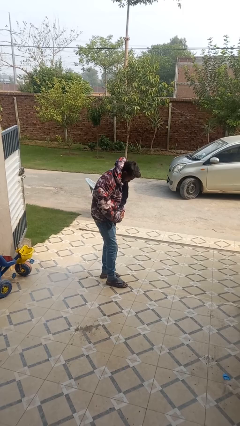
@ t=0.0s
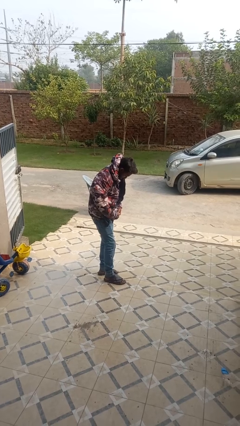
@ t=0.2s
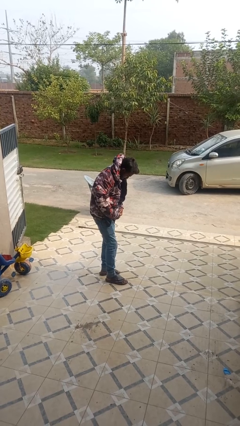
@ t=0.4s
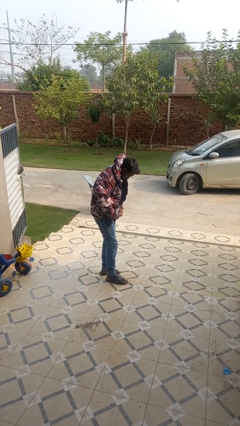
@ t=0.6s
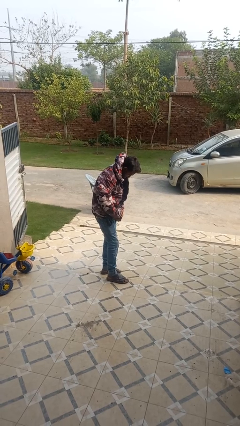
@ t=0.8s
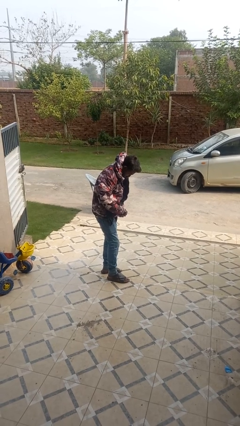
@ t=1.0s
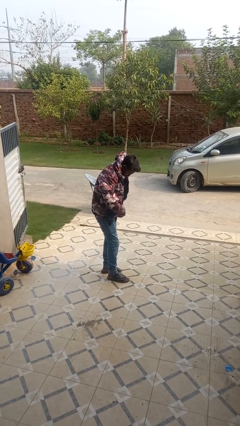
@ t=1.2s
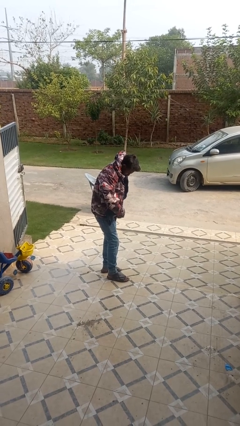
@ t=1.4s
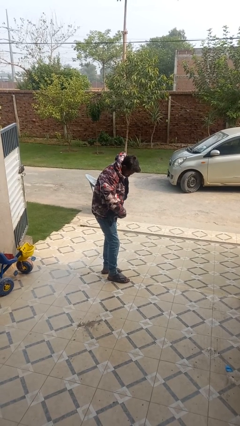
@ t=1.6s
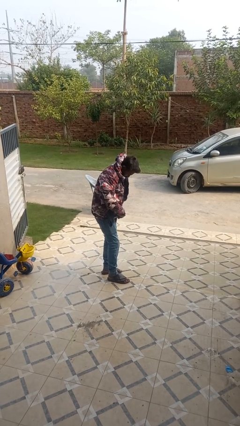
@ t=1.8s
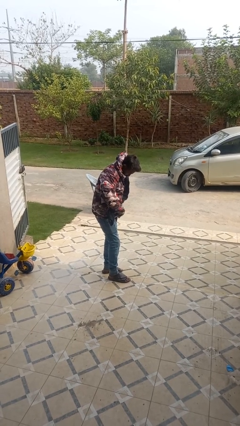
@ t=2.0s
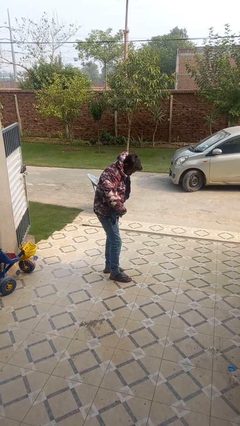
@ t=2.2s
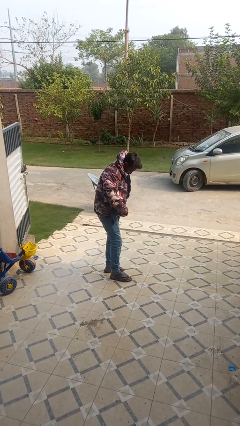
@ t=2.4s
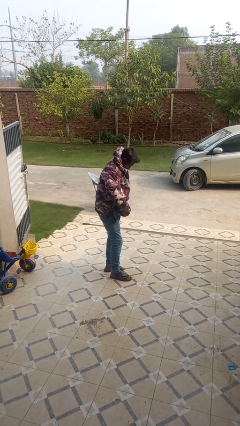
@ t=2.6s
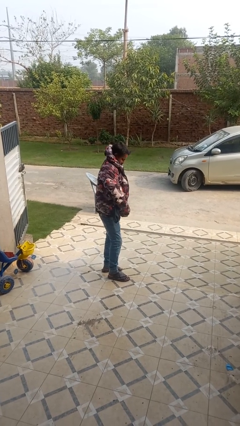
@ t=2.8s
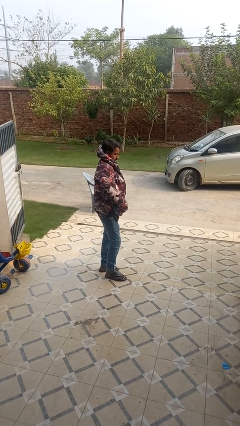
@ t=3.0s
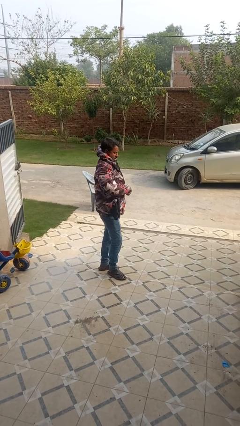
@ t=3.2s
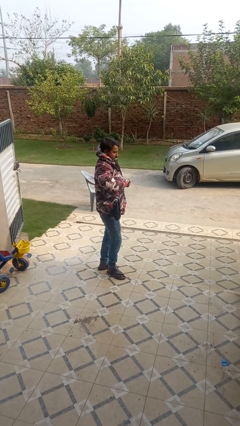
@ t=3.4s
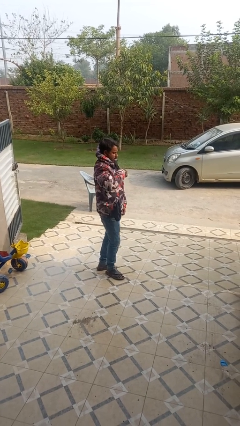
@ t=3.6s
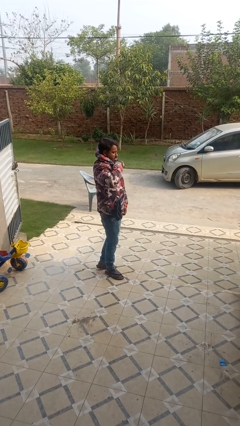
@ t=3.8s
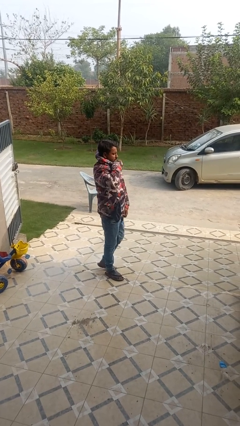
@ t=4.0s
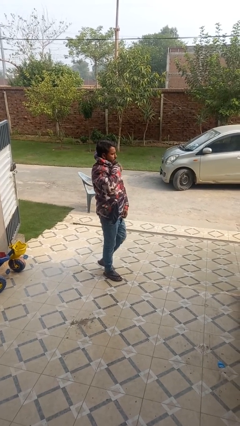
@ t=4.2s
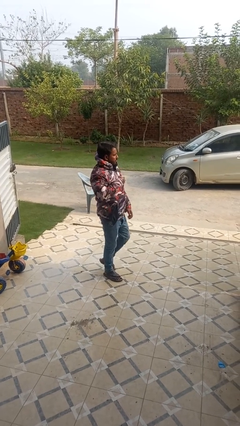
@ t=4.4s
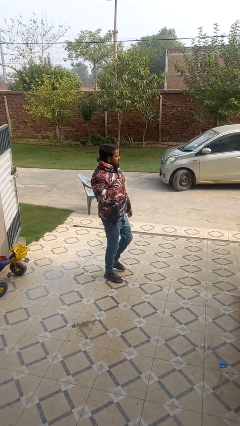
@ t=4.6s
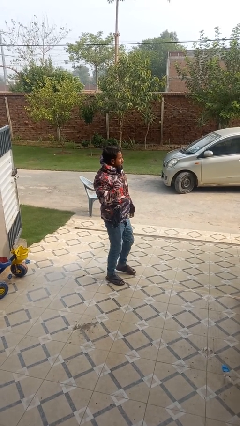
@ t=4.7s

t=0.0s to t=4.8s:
person zips up jacket

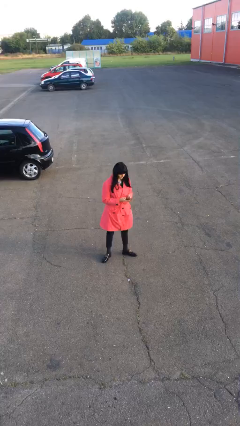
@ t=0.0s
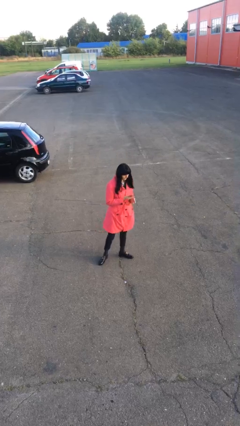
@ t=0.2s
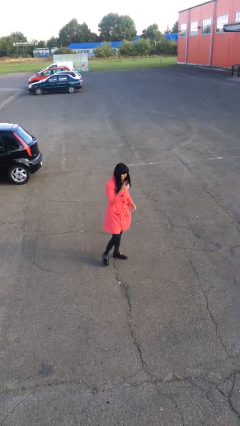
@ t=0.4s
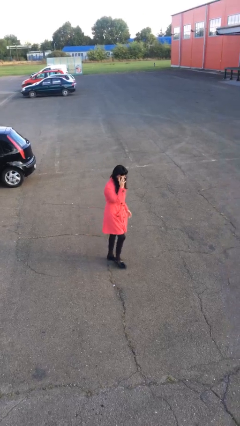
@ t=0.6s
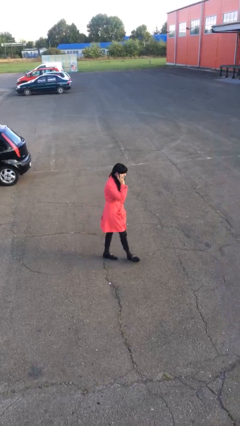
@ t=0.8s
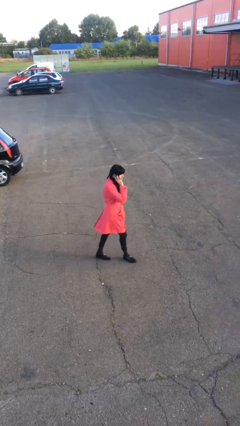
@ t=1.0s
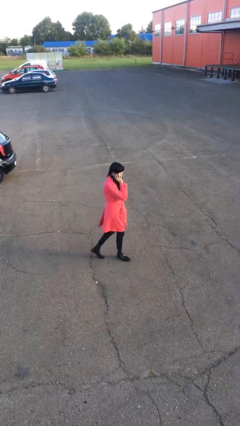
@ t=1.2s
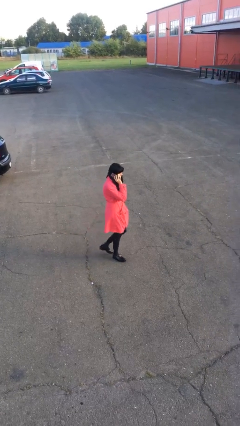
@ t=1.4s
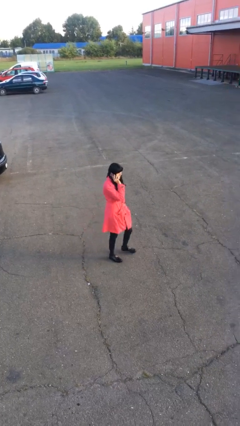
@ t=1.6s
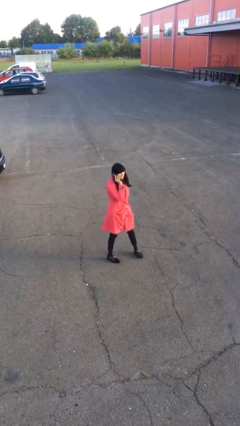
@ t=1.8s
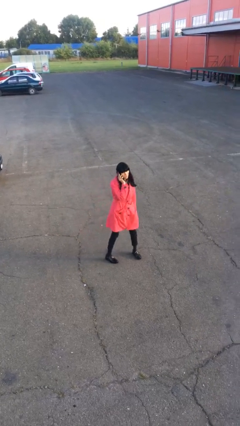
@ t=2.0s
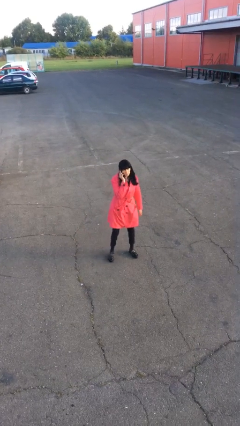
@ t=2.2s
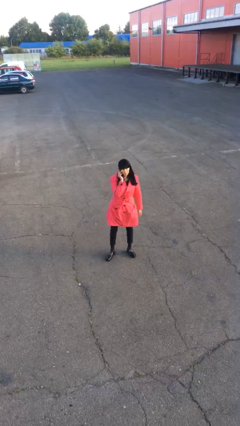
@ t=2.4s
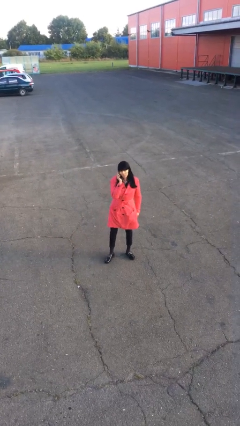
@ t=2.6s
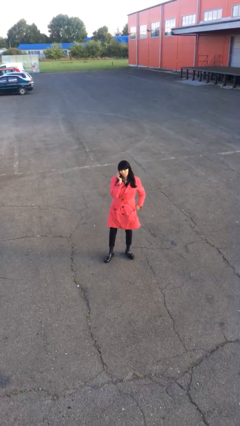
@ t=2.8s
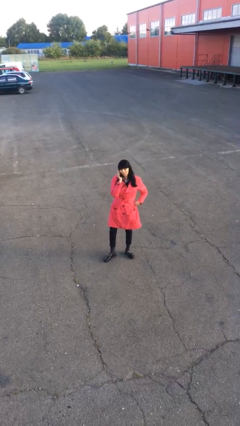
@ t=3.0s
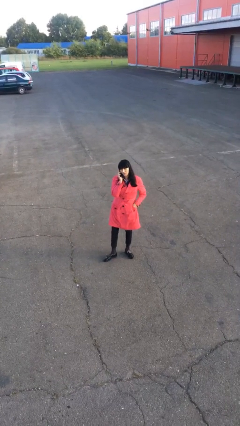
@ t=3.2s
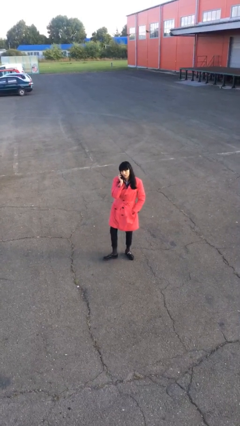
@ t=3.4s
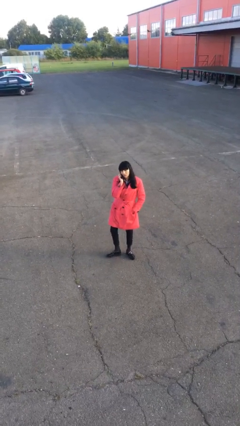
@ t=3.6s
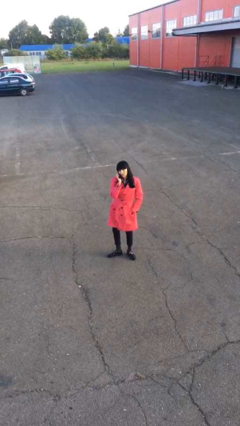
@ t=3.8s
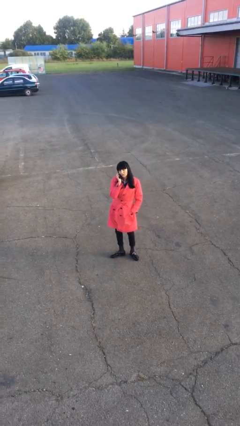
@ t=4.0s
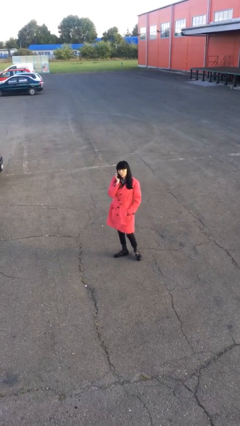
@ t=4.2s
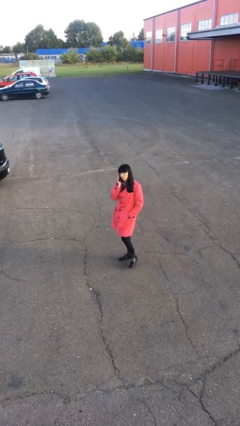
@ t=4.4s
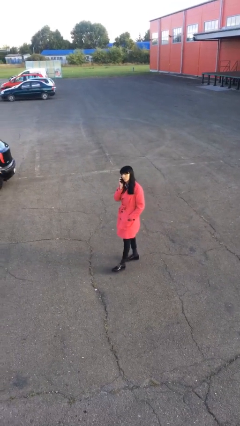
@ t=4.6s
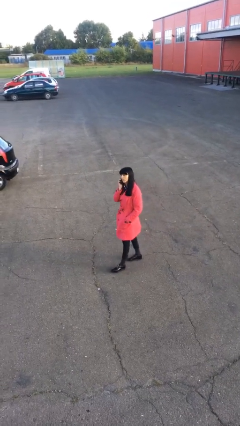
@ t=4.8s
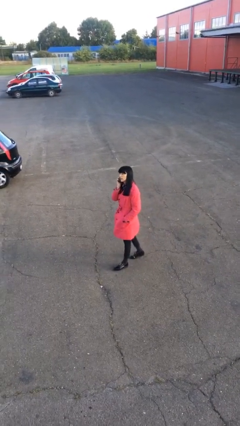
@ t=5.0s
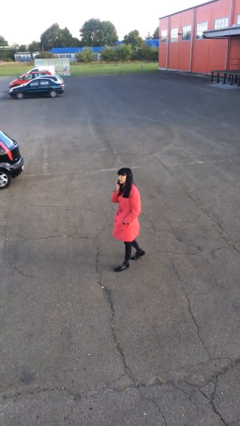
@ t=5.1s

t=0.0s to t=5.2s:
person talks on phone

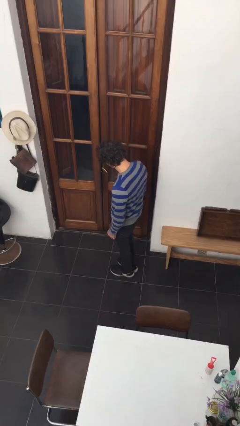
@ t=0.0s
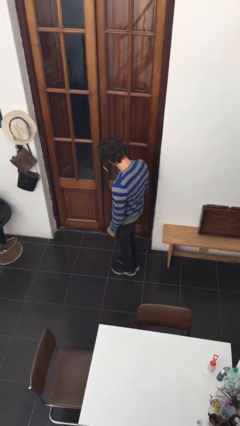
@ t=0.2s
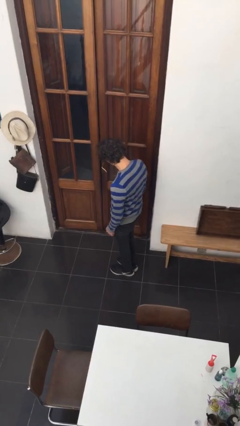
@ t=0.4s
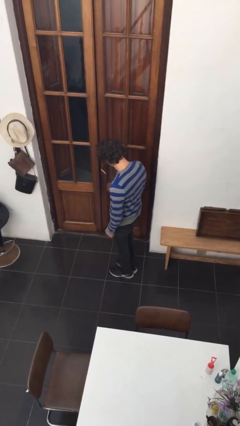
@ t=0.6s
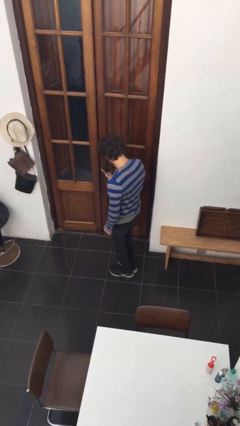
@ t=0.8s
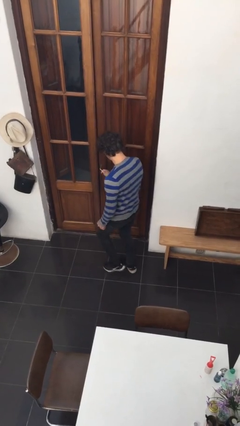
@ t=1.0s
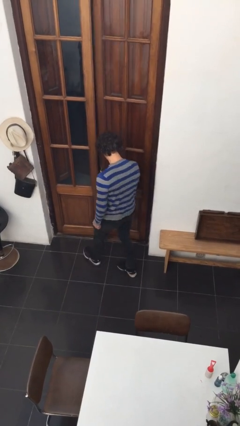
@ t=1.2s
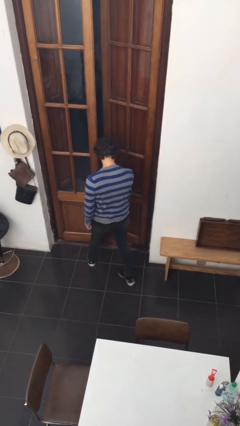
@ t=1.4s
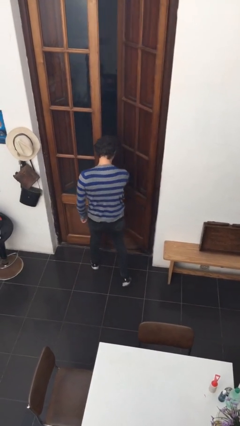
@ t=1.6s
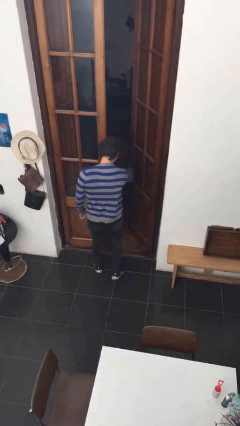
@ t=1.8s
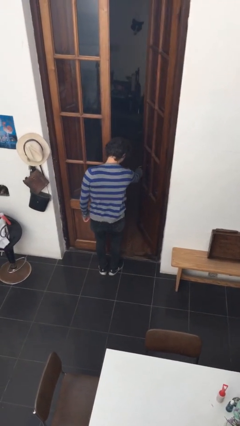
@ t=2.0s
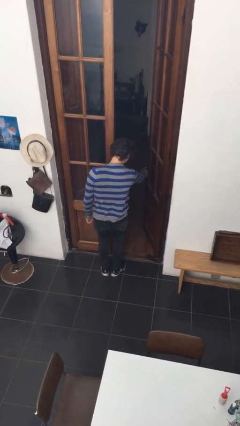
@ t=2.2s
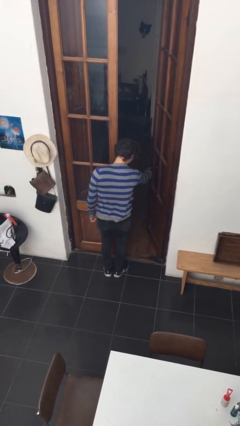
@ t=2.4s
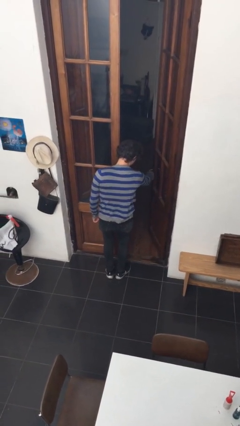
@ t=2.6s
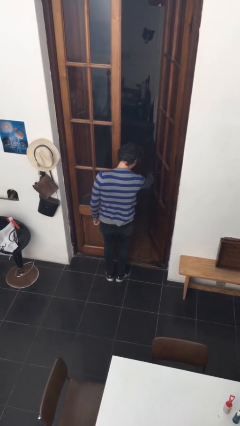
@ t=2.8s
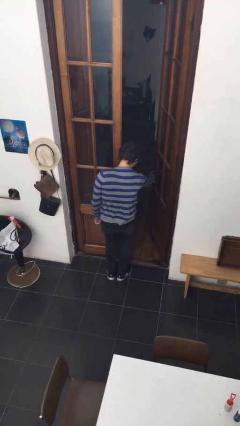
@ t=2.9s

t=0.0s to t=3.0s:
person opens facility door

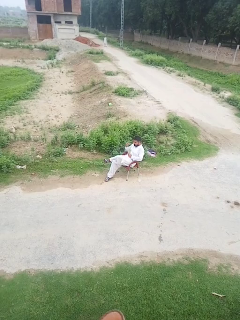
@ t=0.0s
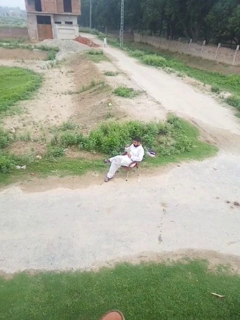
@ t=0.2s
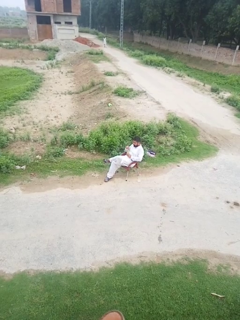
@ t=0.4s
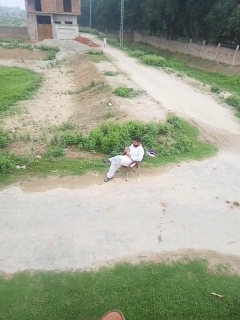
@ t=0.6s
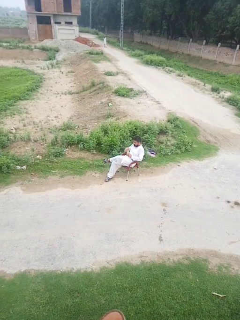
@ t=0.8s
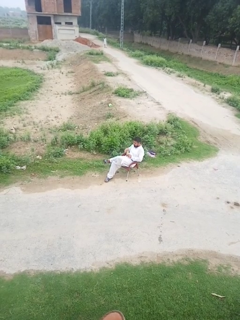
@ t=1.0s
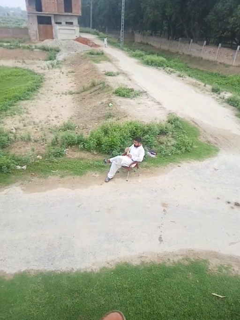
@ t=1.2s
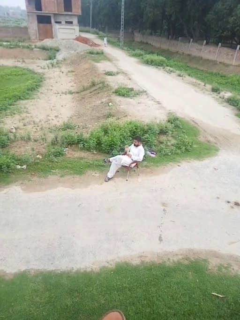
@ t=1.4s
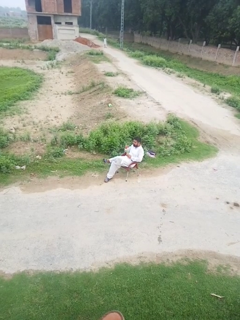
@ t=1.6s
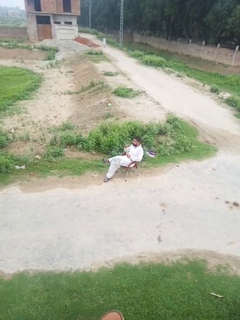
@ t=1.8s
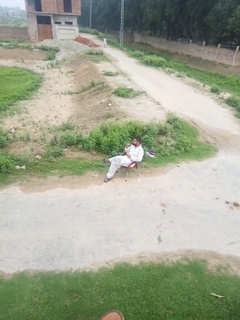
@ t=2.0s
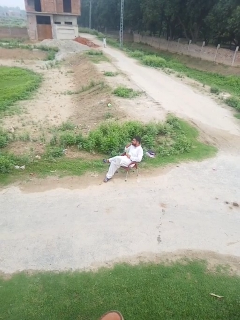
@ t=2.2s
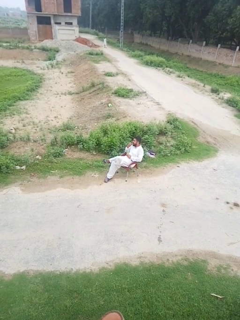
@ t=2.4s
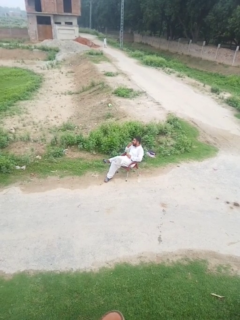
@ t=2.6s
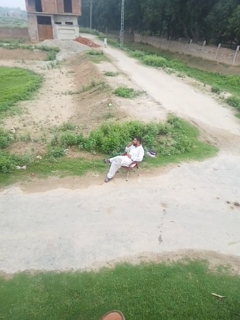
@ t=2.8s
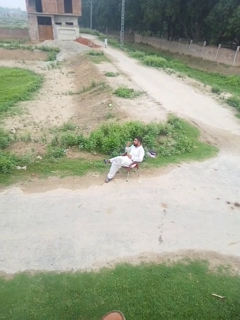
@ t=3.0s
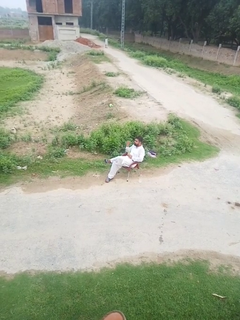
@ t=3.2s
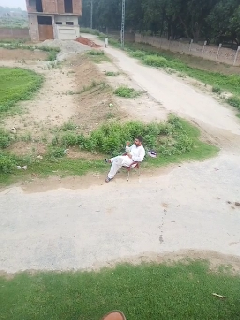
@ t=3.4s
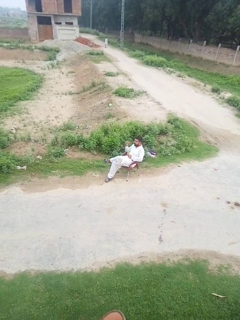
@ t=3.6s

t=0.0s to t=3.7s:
person eats snack from bag

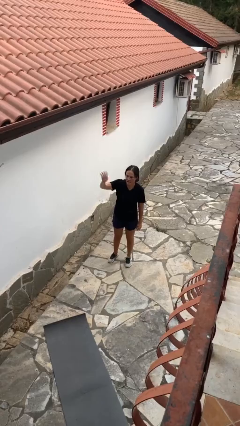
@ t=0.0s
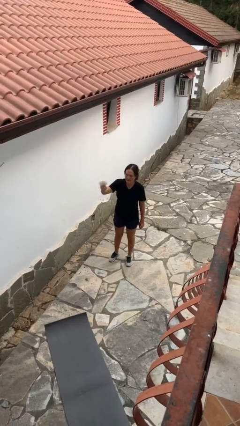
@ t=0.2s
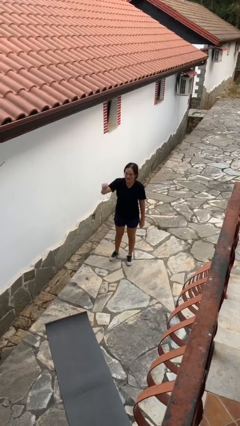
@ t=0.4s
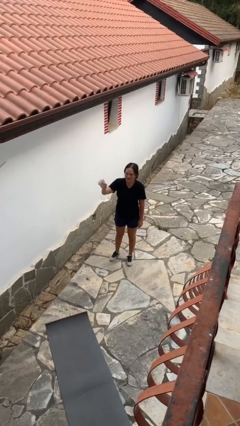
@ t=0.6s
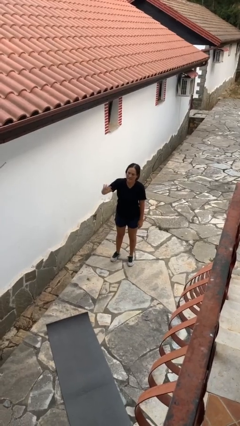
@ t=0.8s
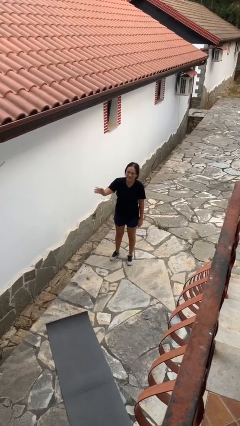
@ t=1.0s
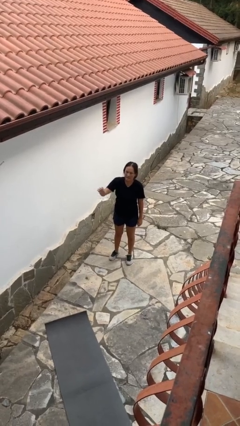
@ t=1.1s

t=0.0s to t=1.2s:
person gestures lower hand

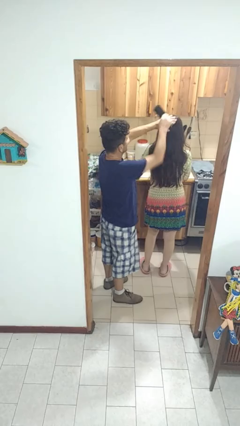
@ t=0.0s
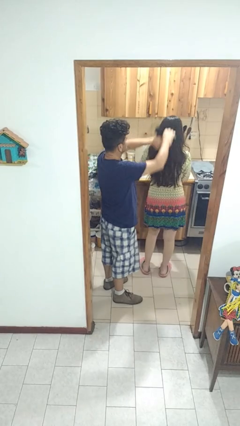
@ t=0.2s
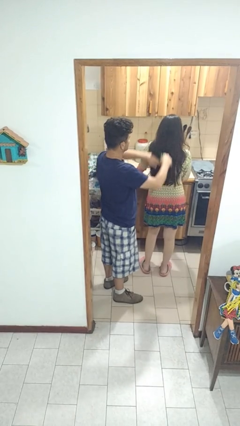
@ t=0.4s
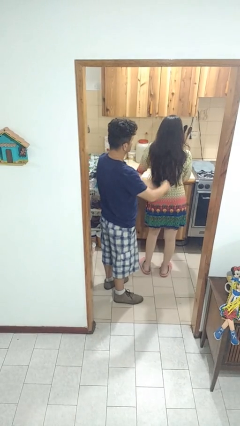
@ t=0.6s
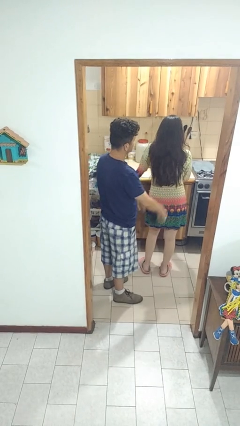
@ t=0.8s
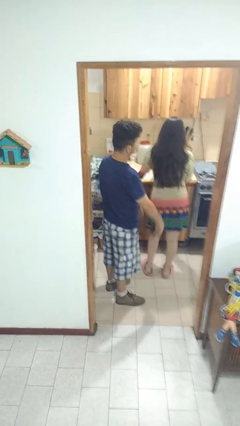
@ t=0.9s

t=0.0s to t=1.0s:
person brushes hair of person
